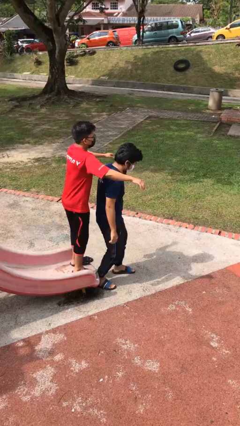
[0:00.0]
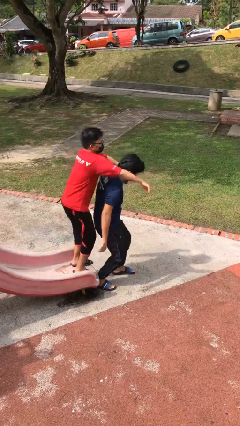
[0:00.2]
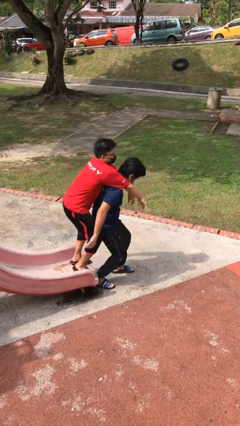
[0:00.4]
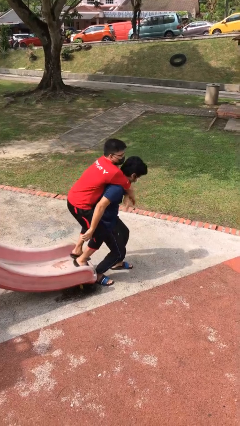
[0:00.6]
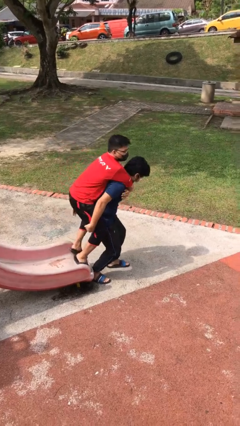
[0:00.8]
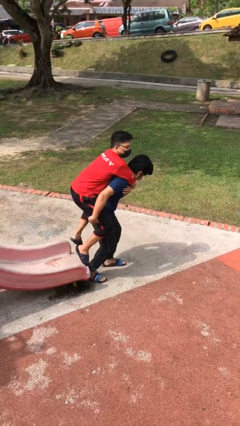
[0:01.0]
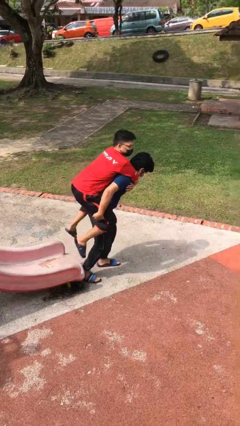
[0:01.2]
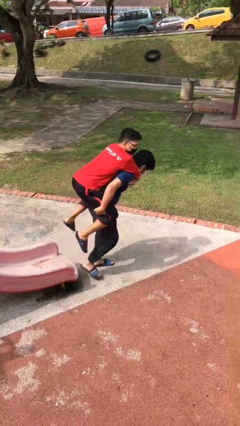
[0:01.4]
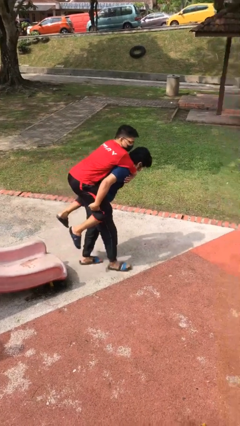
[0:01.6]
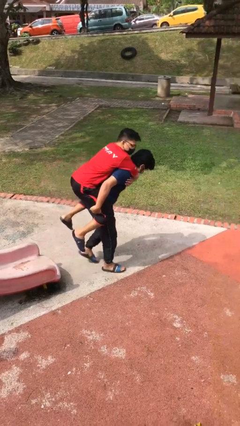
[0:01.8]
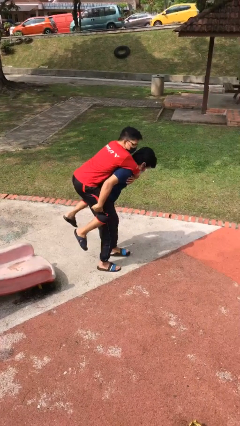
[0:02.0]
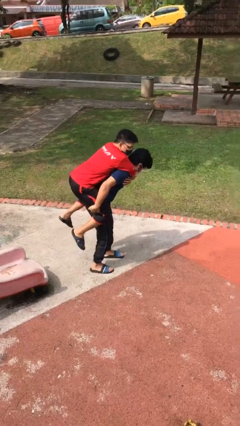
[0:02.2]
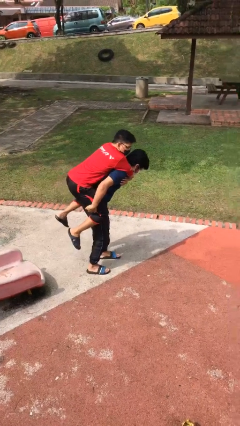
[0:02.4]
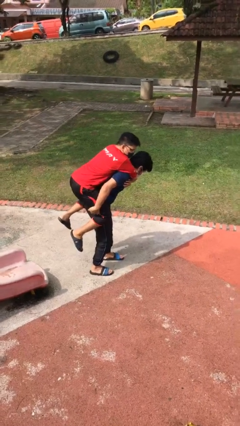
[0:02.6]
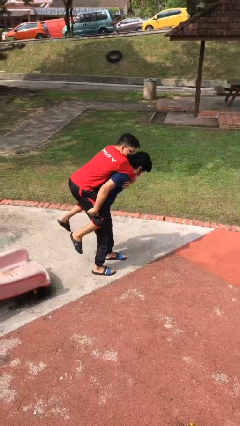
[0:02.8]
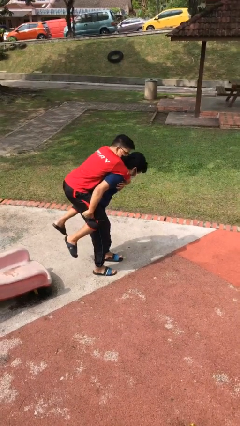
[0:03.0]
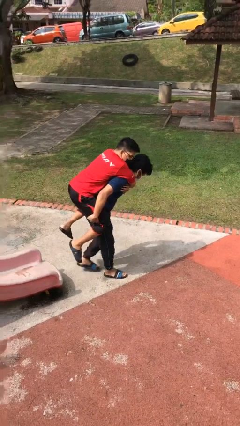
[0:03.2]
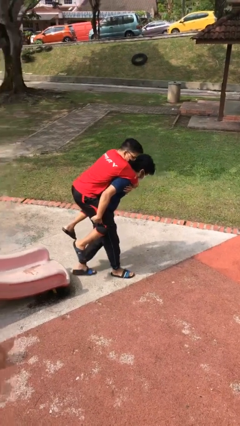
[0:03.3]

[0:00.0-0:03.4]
person carries person on back

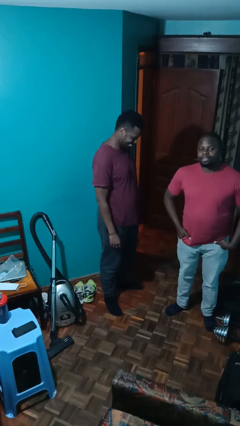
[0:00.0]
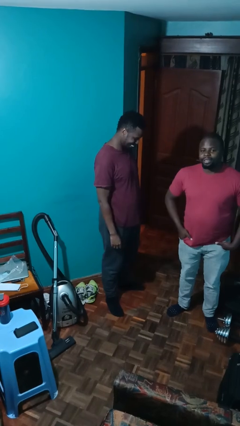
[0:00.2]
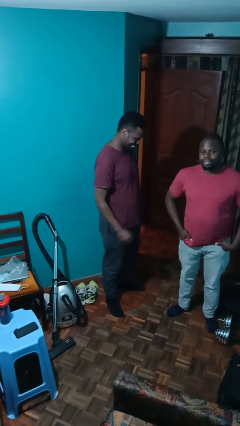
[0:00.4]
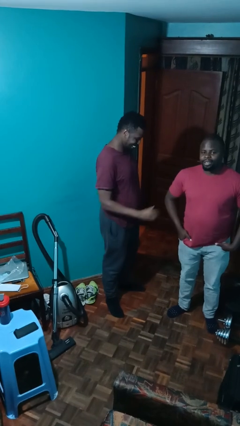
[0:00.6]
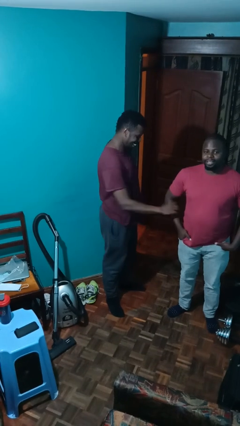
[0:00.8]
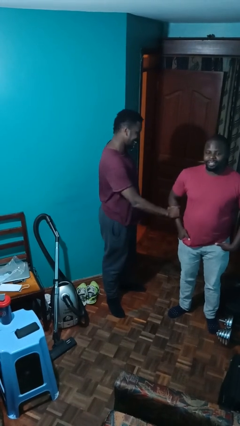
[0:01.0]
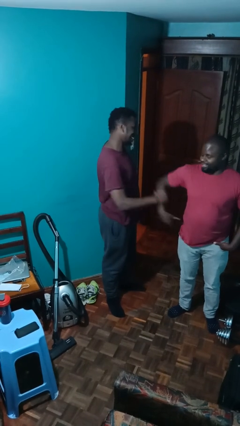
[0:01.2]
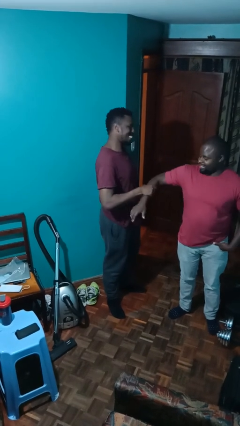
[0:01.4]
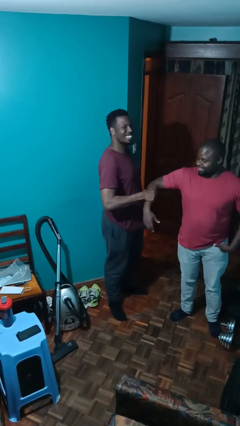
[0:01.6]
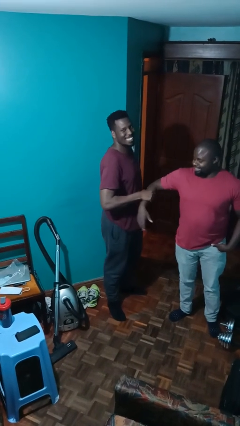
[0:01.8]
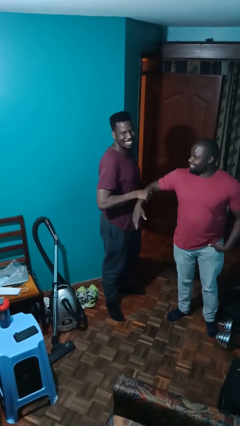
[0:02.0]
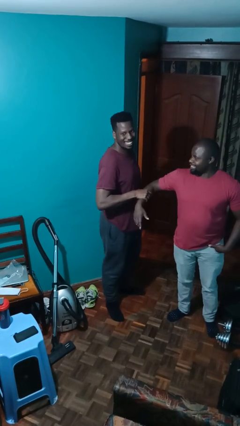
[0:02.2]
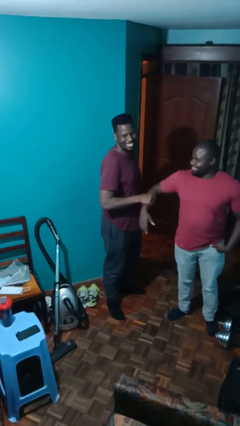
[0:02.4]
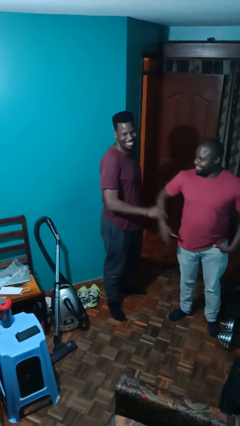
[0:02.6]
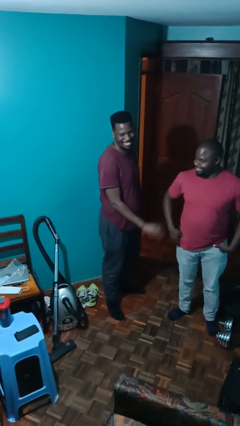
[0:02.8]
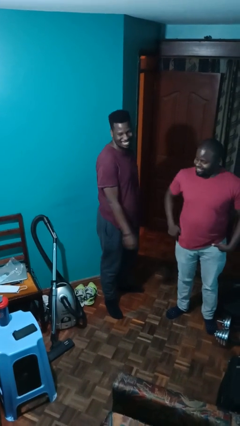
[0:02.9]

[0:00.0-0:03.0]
person grabs person by forearm

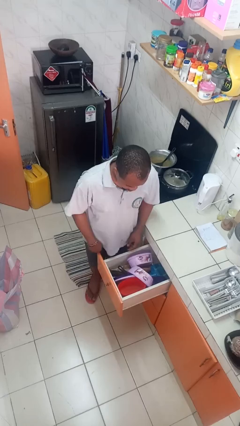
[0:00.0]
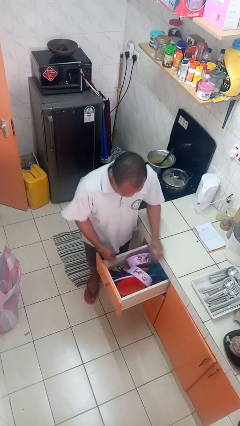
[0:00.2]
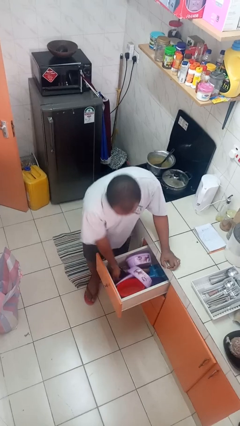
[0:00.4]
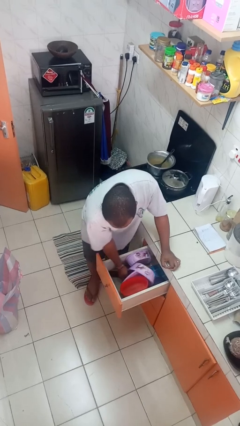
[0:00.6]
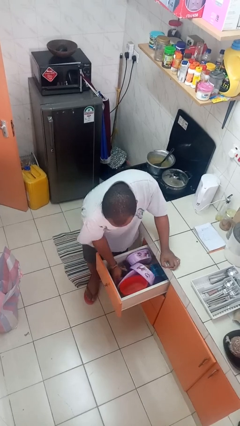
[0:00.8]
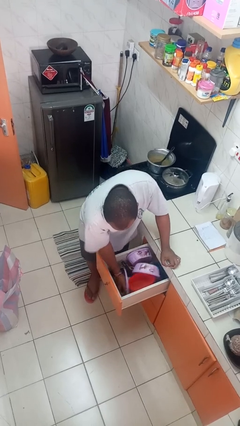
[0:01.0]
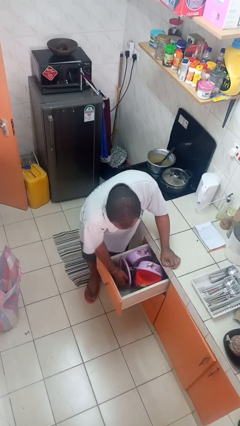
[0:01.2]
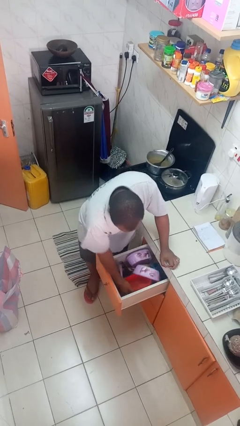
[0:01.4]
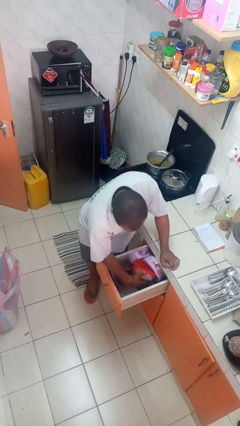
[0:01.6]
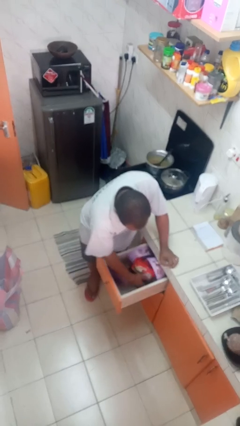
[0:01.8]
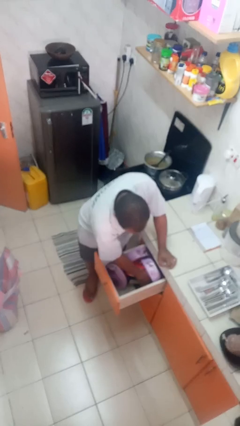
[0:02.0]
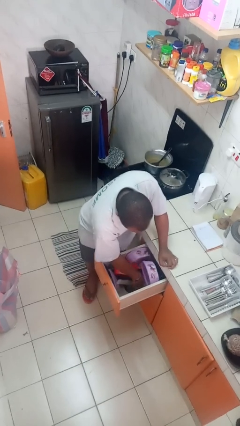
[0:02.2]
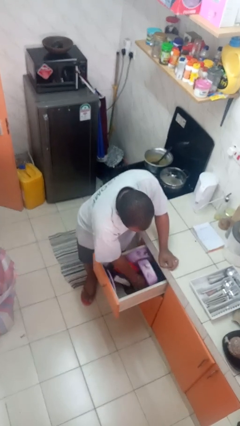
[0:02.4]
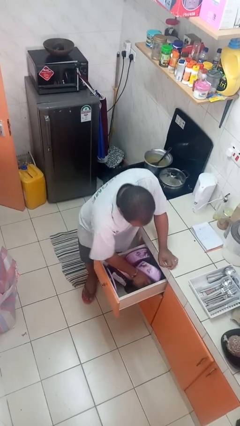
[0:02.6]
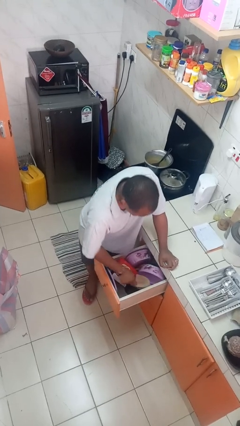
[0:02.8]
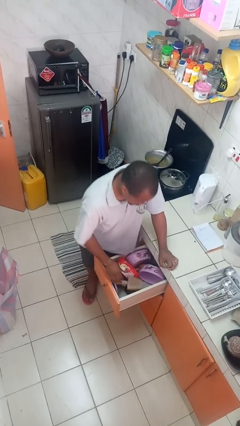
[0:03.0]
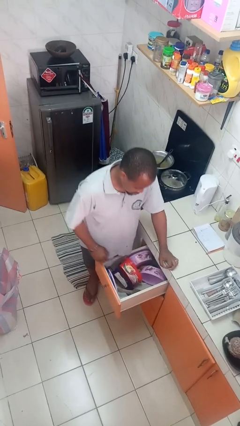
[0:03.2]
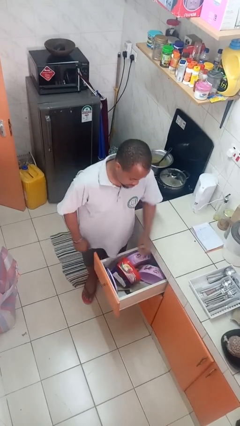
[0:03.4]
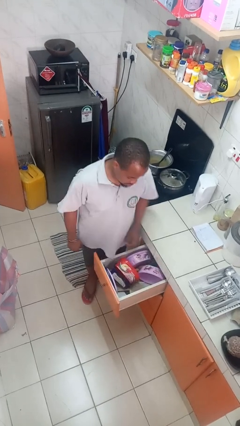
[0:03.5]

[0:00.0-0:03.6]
person searches in kitchen drawer

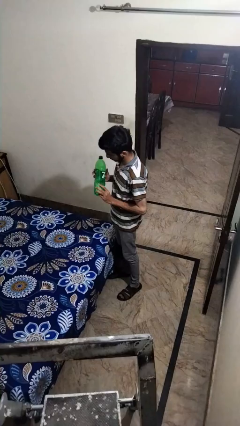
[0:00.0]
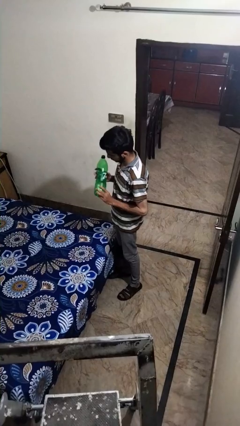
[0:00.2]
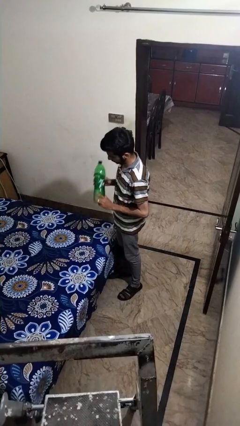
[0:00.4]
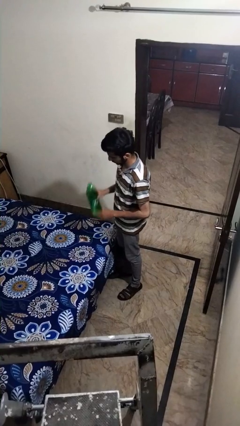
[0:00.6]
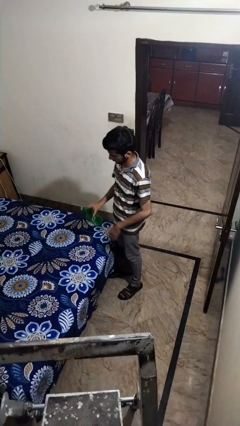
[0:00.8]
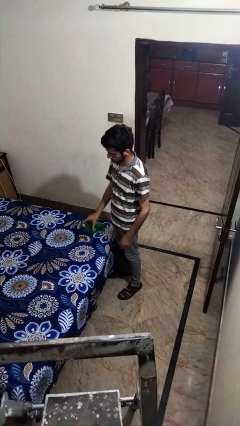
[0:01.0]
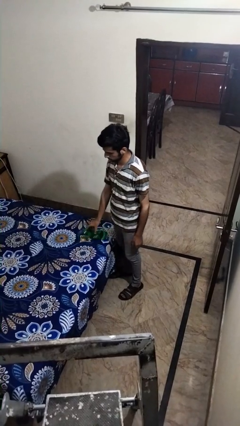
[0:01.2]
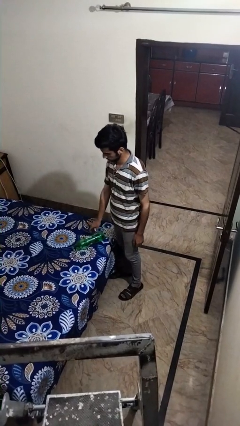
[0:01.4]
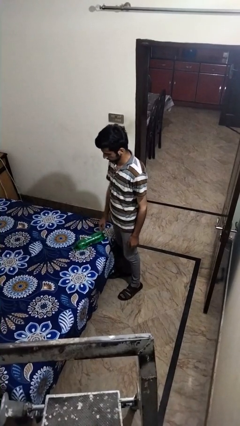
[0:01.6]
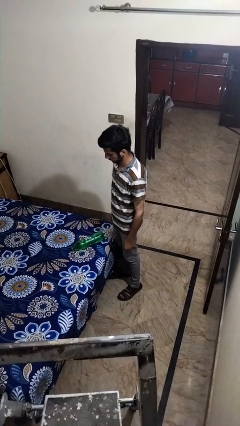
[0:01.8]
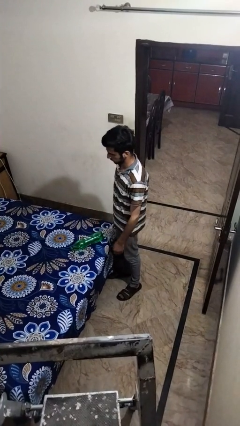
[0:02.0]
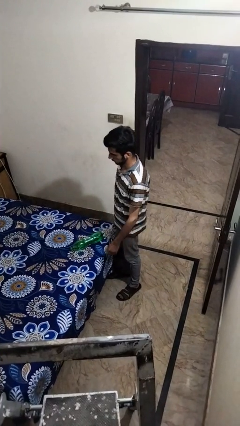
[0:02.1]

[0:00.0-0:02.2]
person puts down object on bed

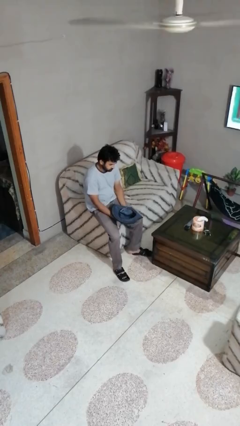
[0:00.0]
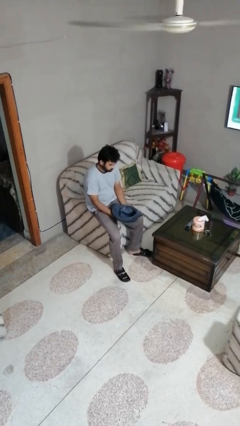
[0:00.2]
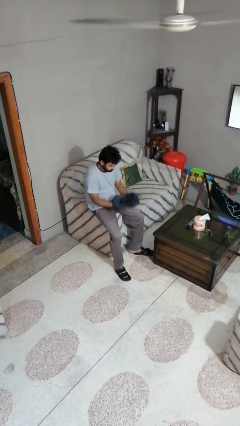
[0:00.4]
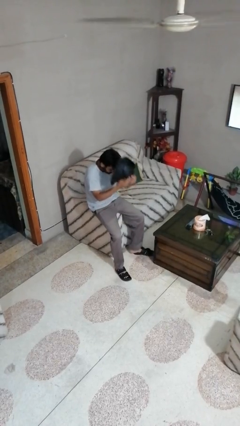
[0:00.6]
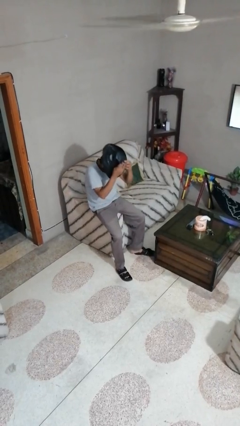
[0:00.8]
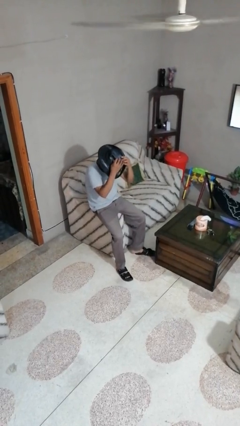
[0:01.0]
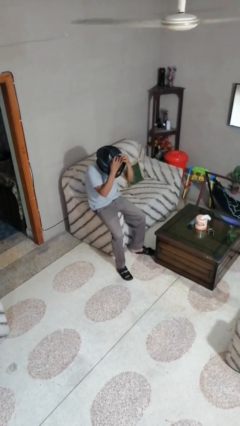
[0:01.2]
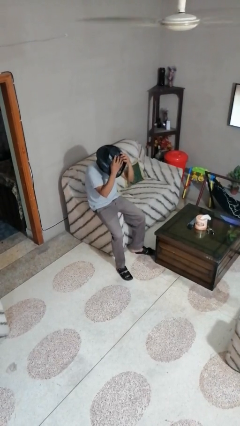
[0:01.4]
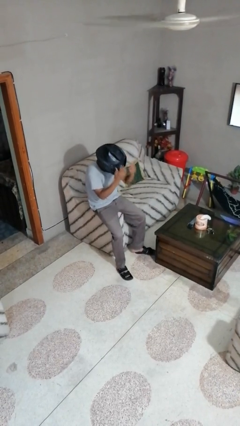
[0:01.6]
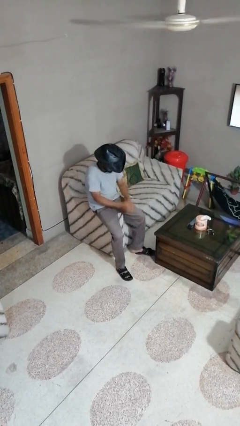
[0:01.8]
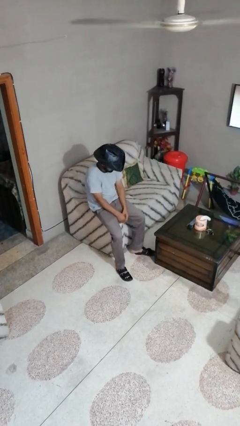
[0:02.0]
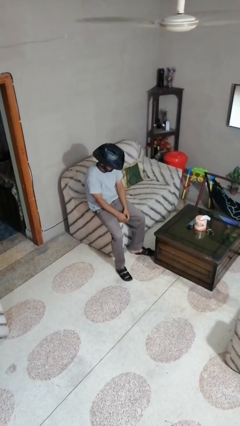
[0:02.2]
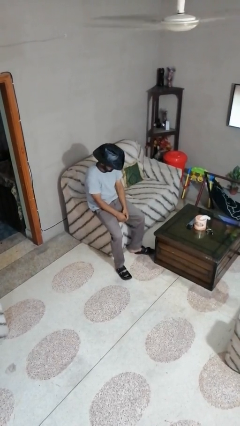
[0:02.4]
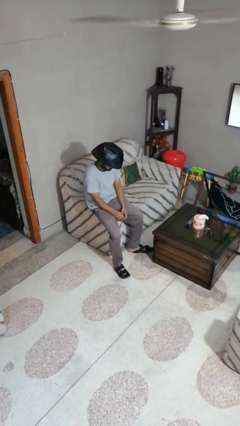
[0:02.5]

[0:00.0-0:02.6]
person puts on hat

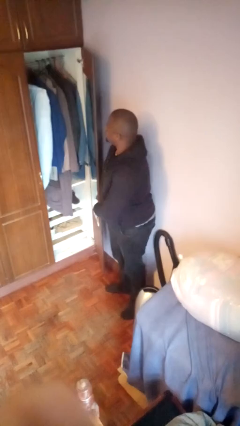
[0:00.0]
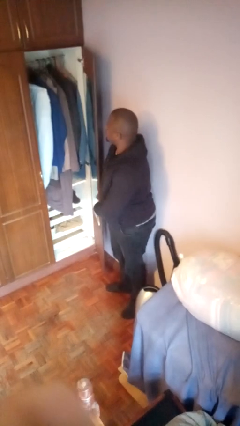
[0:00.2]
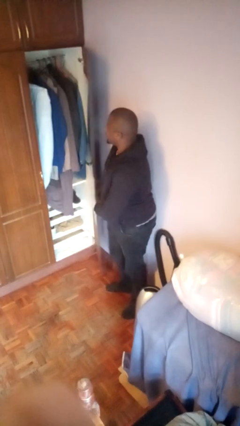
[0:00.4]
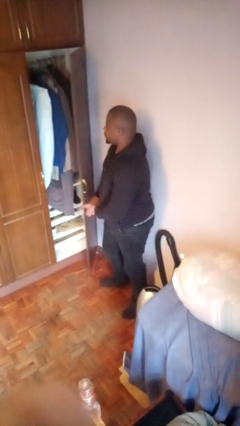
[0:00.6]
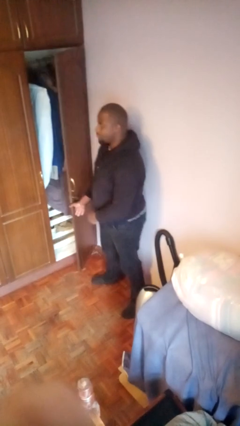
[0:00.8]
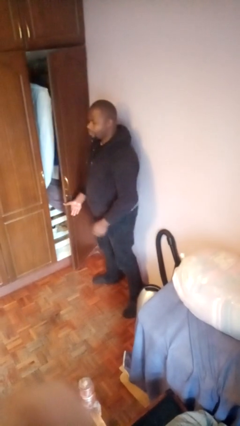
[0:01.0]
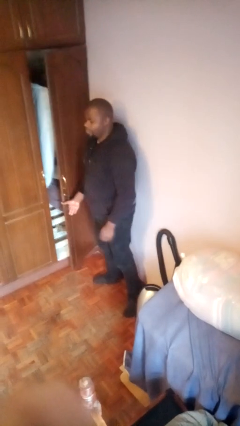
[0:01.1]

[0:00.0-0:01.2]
person closes closet door

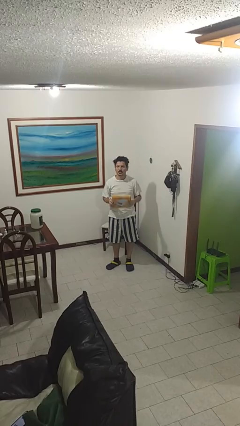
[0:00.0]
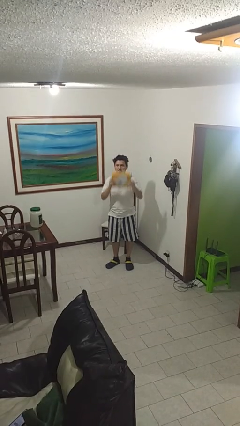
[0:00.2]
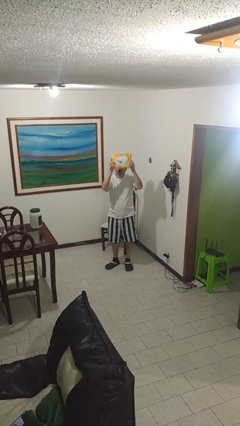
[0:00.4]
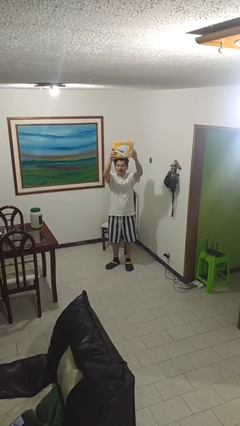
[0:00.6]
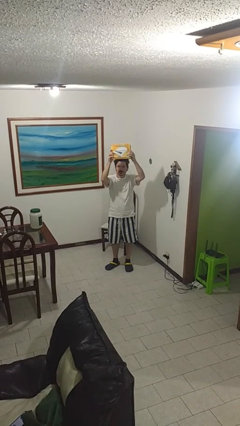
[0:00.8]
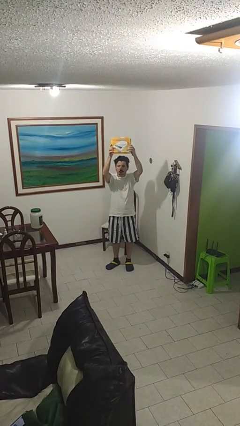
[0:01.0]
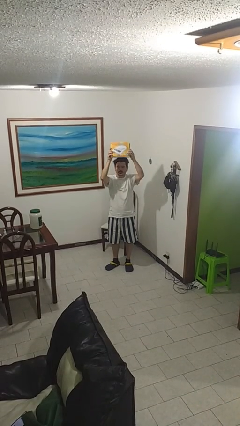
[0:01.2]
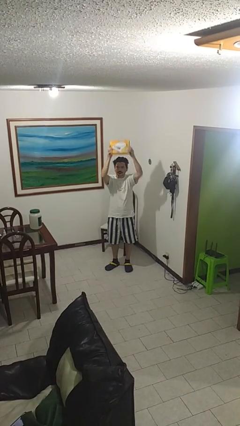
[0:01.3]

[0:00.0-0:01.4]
person holds object above head
